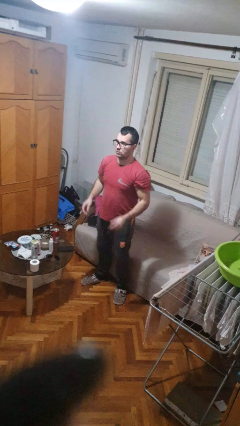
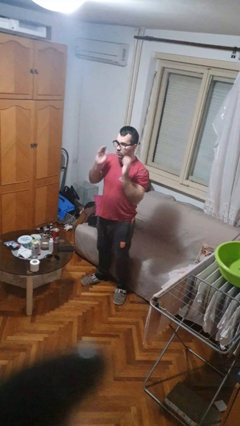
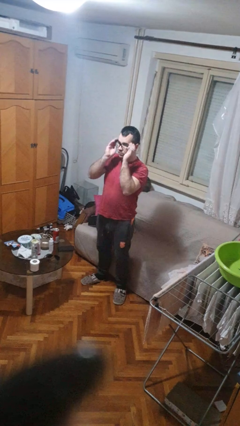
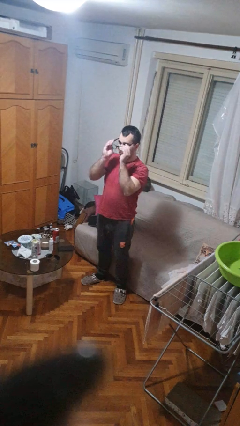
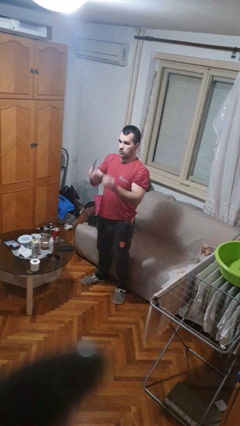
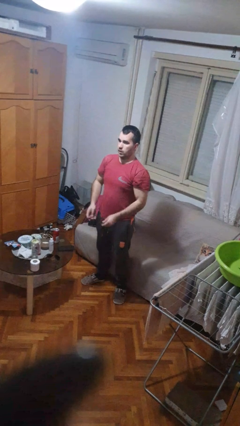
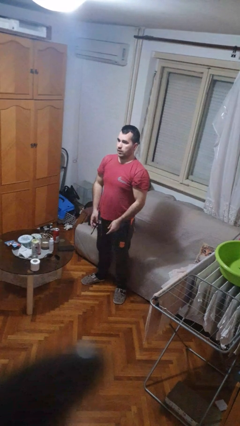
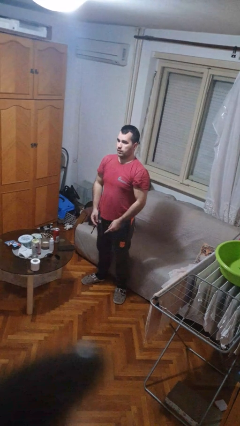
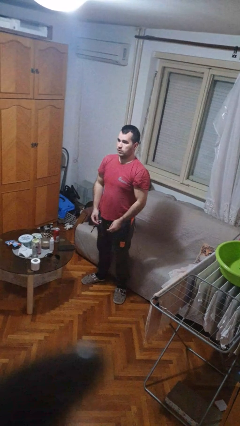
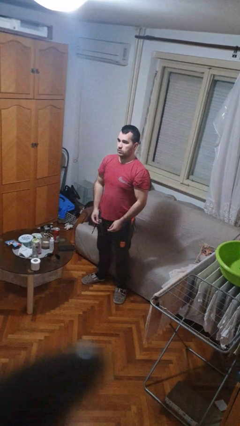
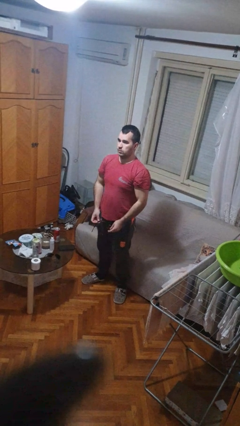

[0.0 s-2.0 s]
person takes off glasses

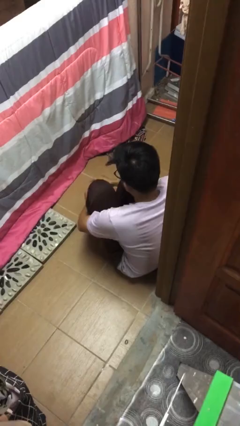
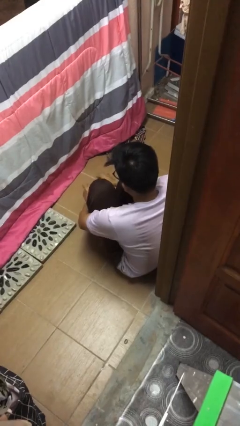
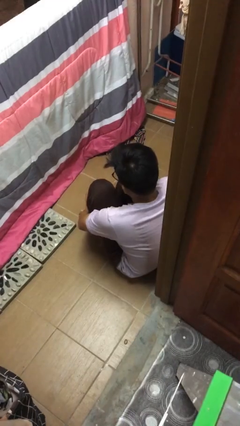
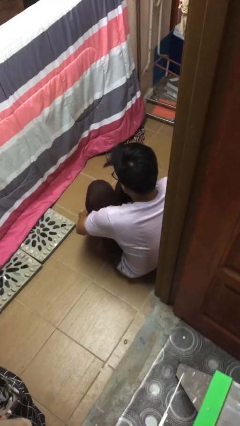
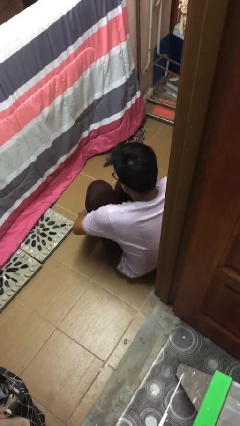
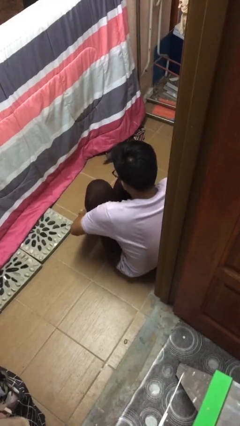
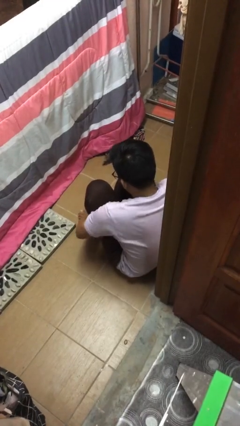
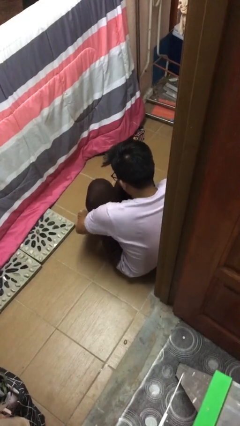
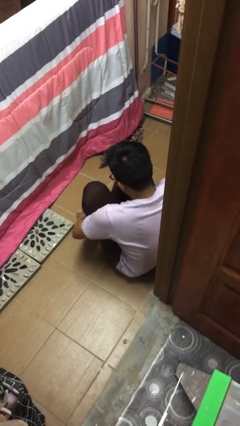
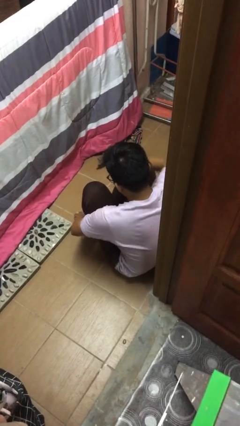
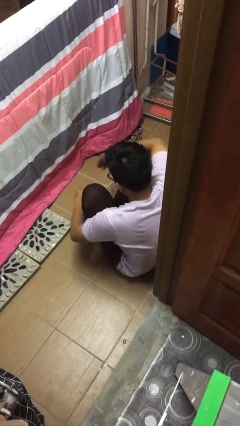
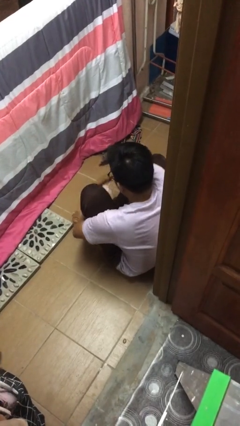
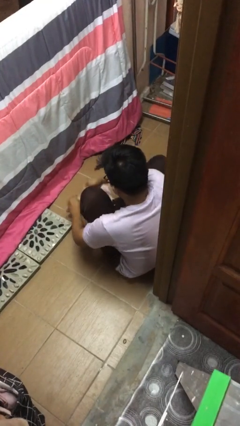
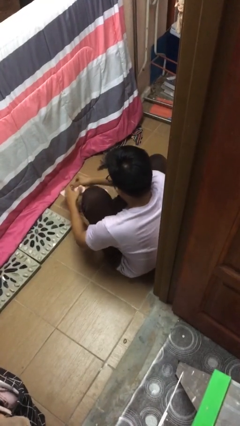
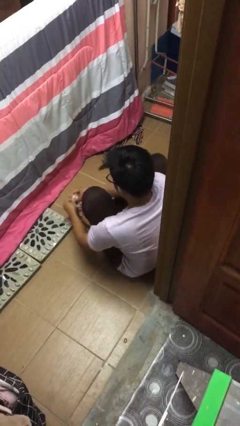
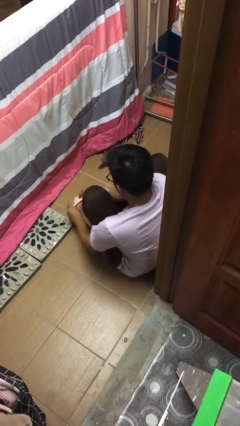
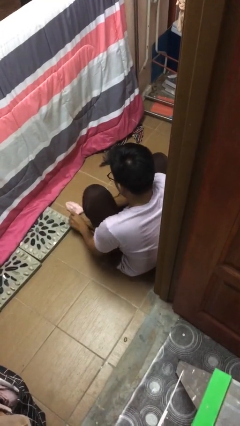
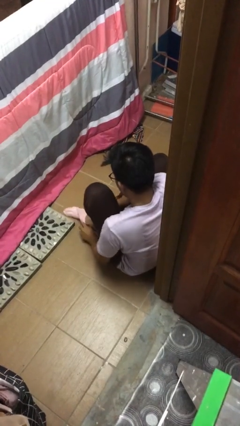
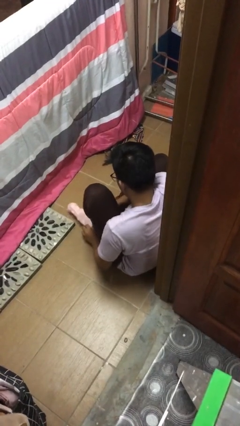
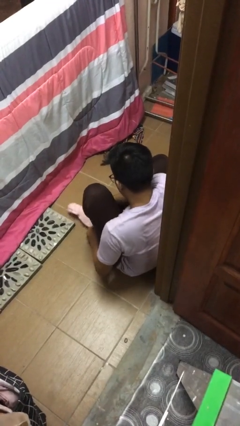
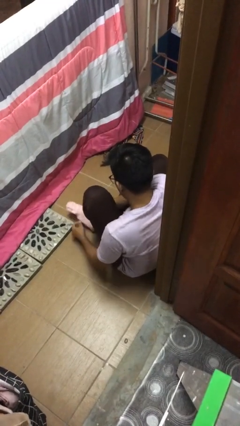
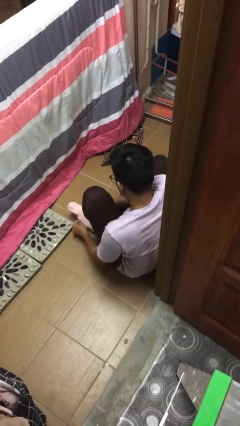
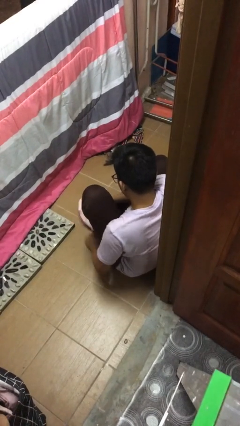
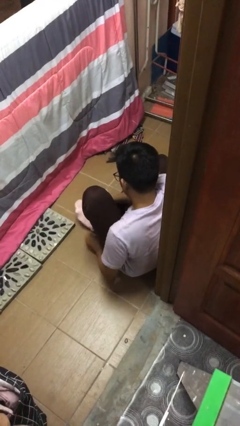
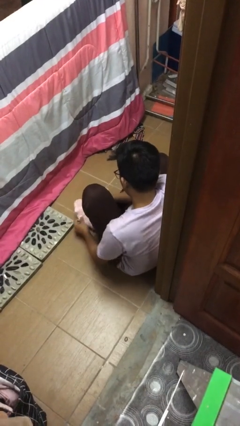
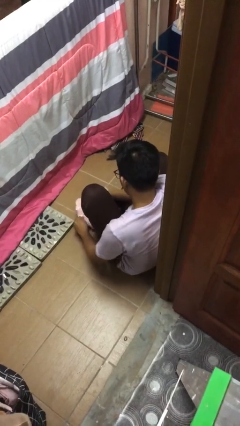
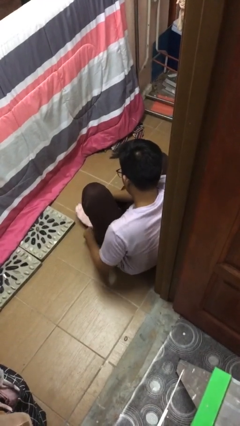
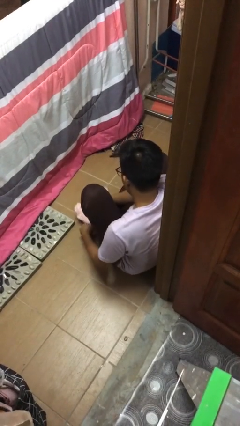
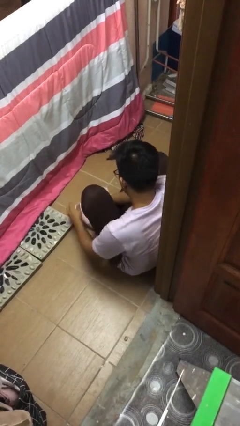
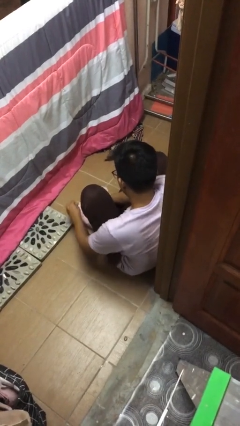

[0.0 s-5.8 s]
person puts on socks

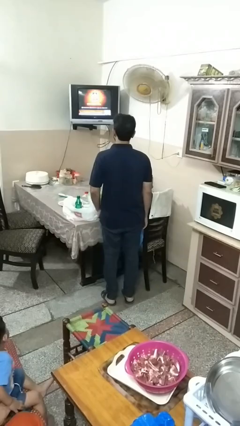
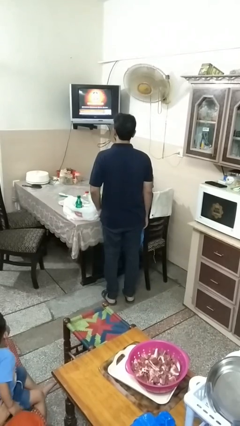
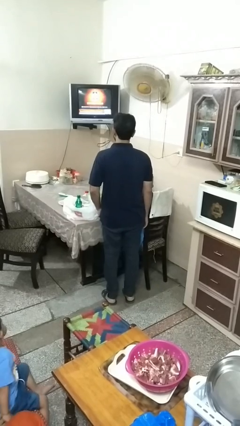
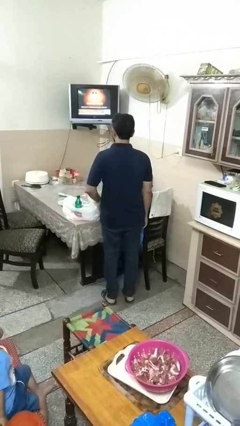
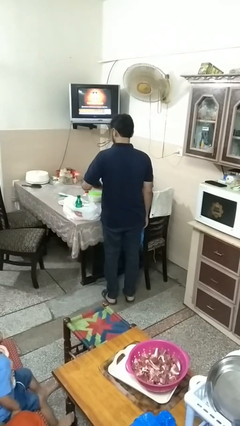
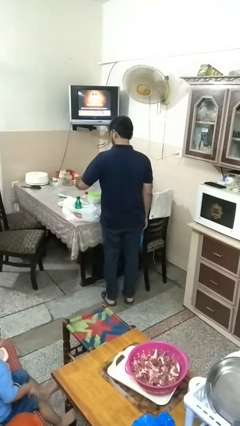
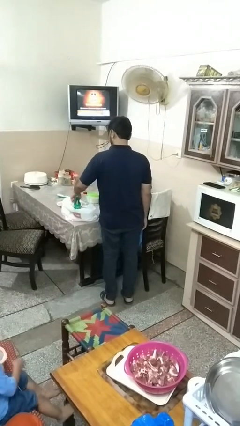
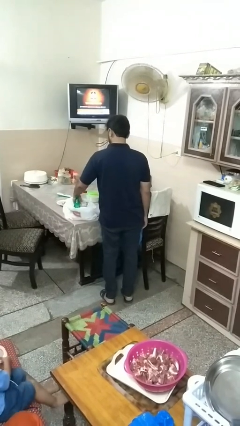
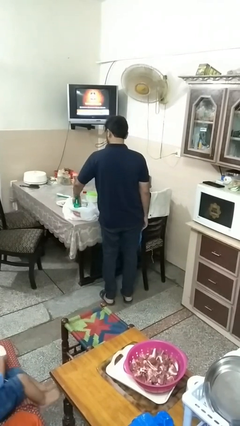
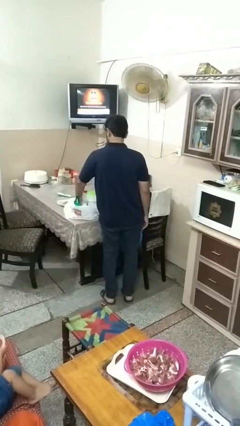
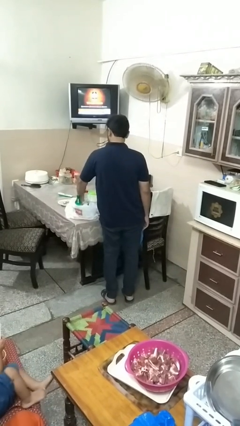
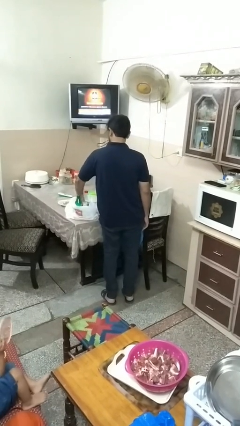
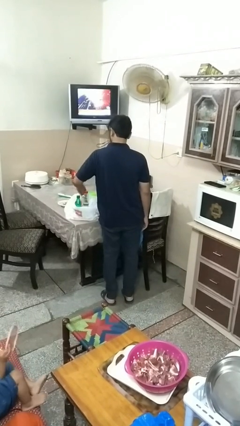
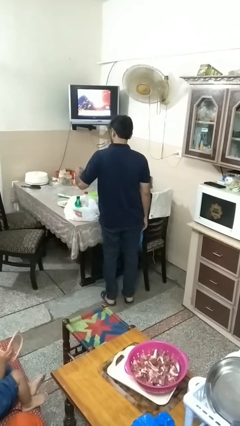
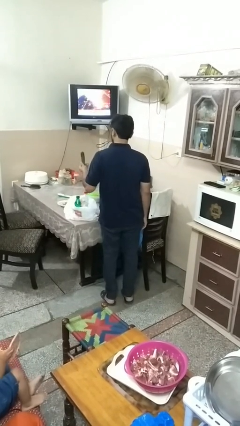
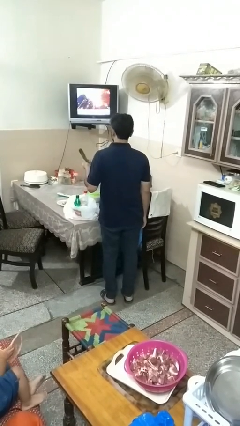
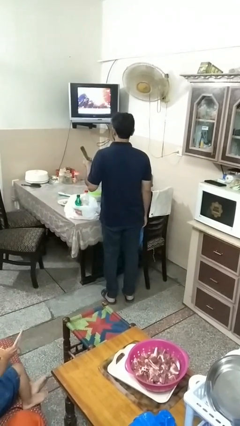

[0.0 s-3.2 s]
person takes object from bag

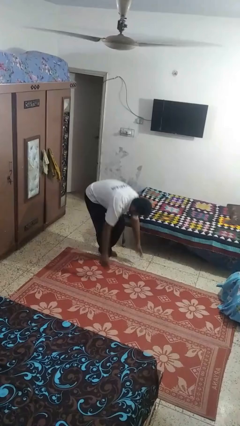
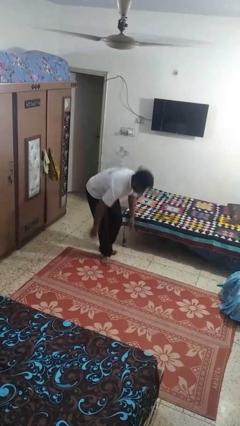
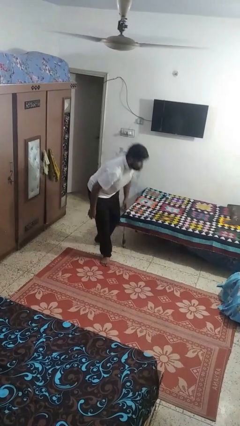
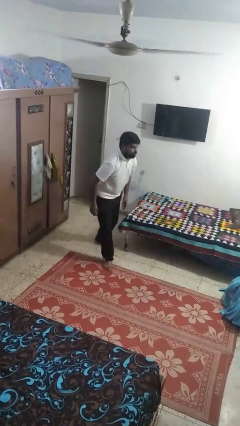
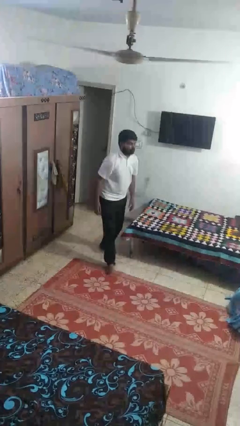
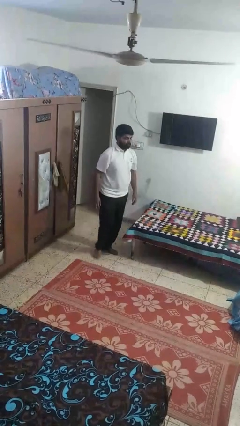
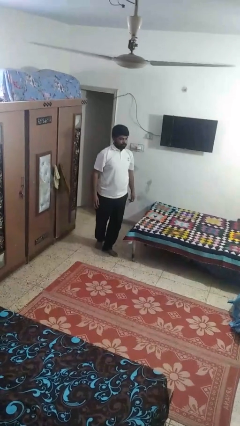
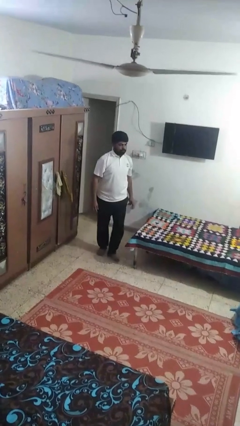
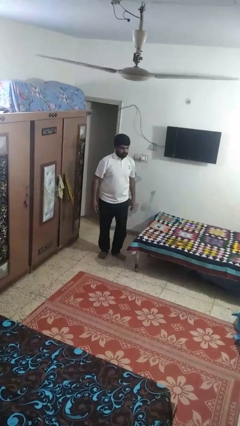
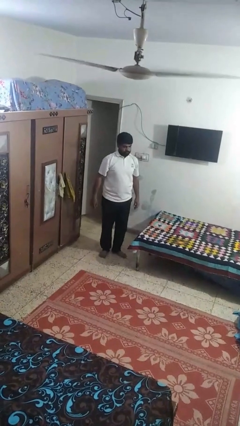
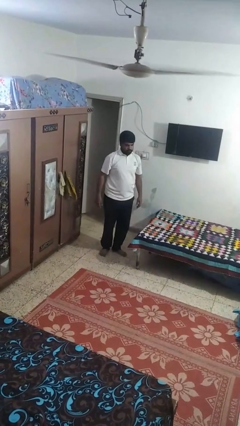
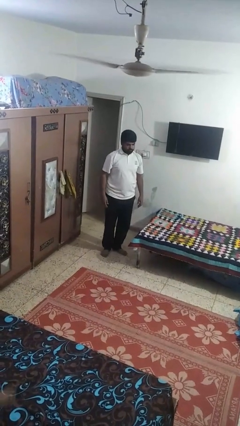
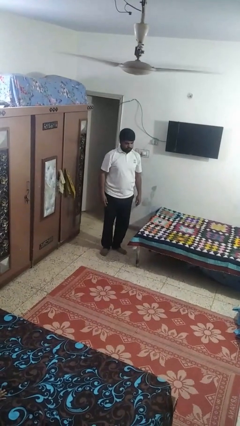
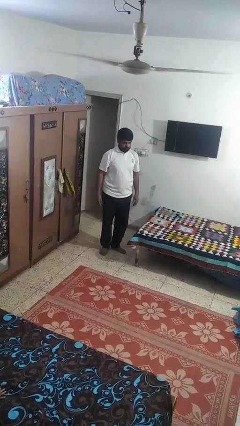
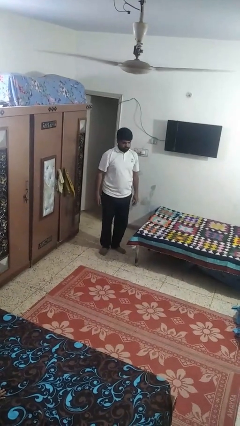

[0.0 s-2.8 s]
person stands up from floor

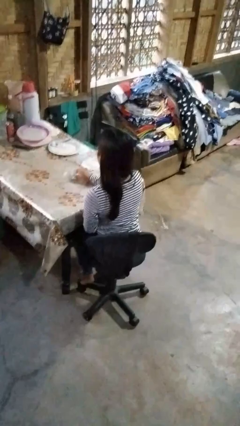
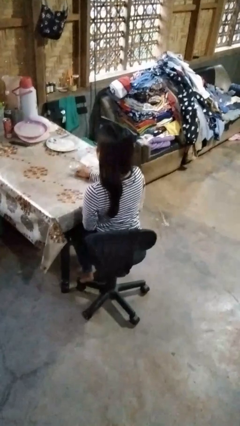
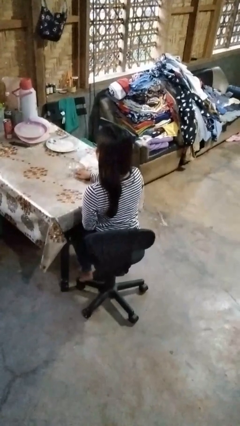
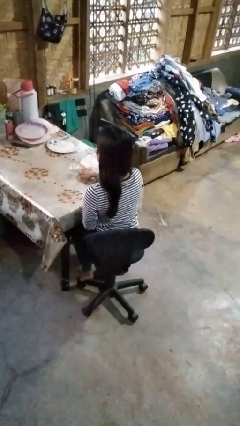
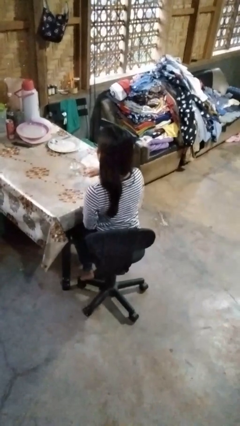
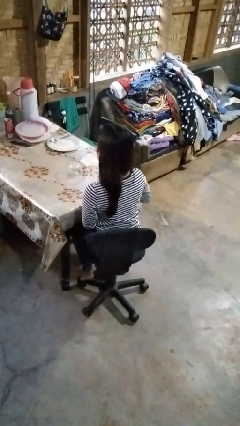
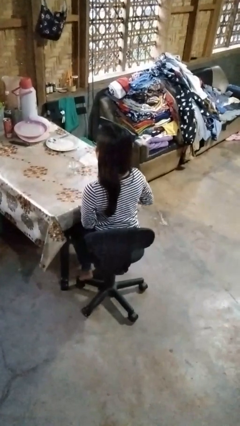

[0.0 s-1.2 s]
person sets upright glass

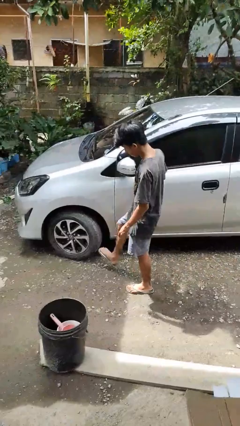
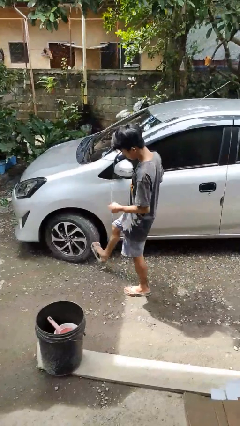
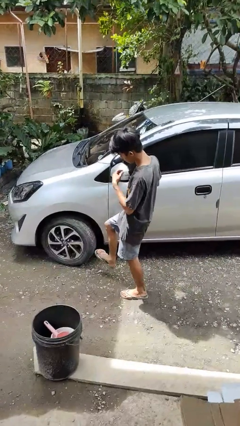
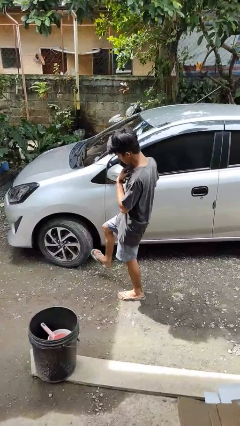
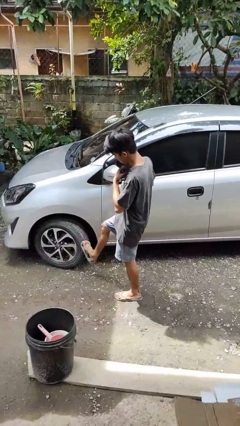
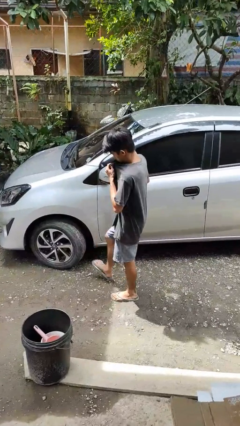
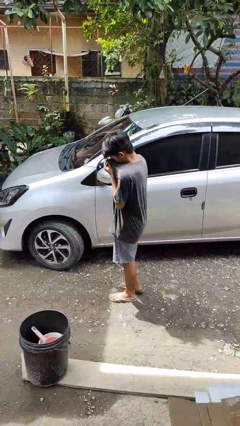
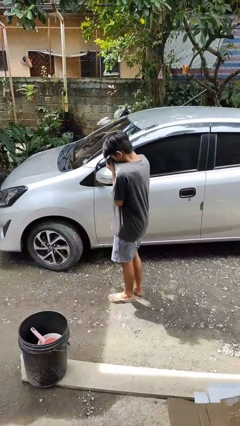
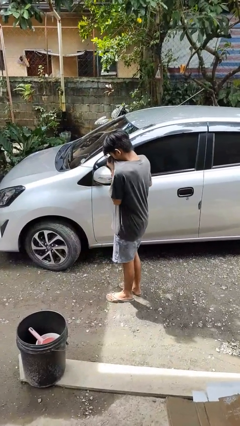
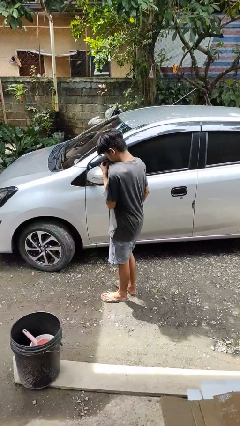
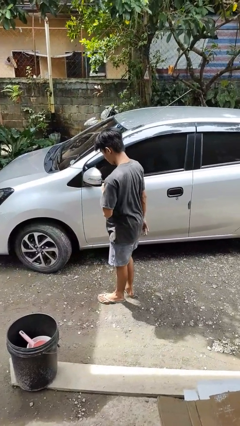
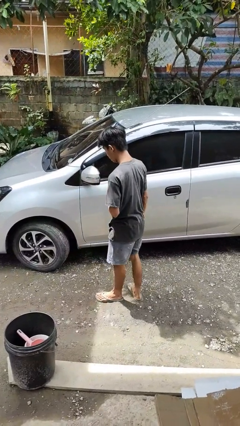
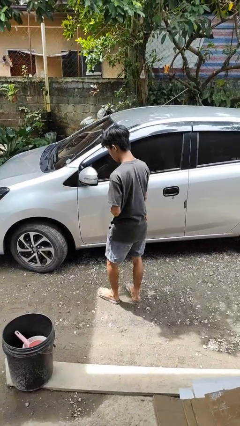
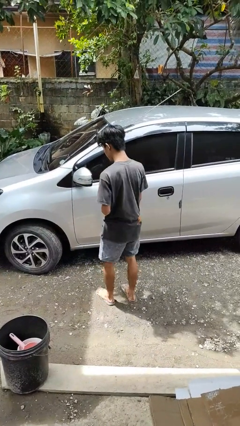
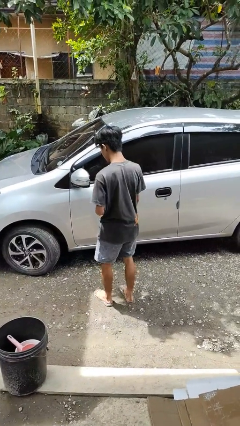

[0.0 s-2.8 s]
person kicks car tires
